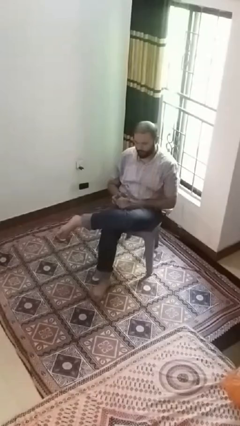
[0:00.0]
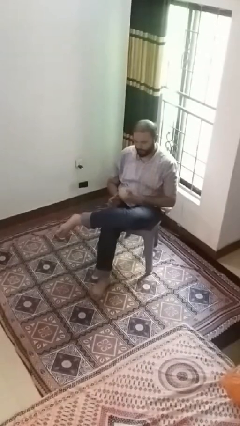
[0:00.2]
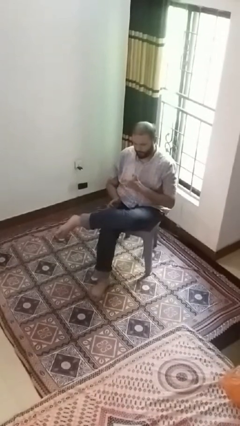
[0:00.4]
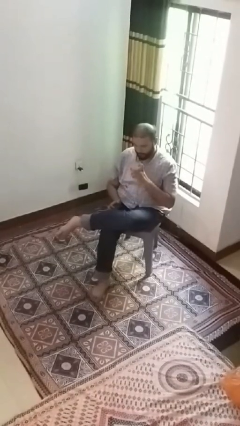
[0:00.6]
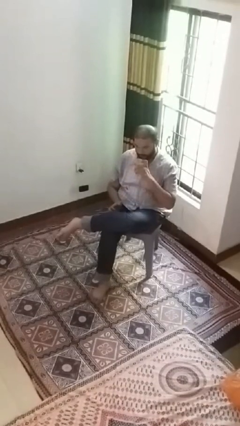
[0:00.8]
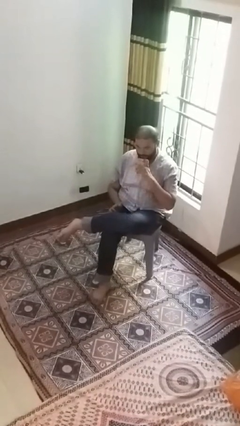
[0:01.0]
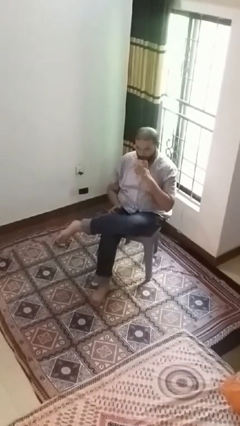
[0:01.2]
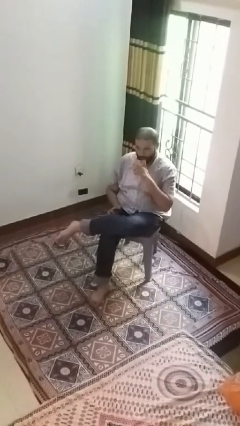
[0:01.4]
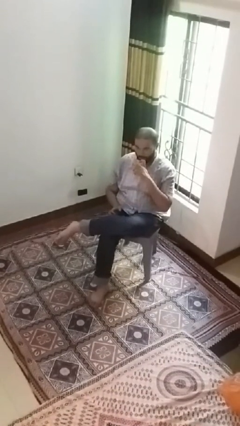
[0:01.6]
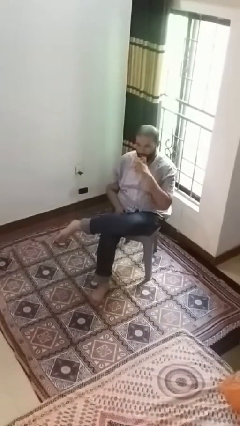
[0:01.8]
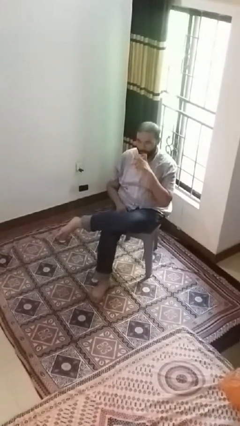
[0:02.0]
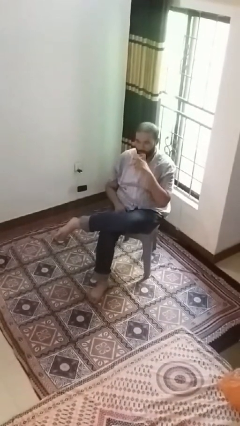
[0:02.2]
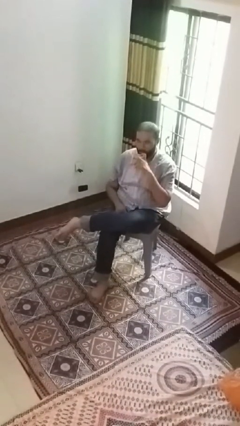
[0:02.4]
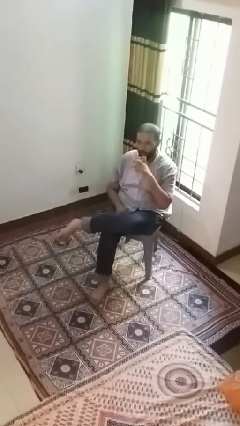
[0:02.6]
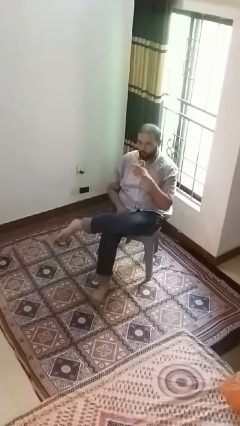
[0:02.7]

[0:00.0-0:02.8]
person drinks from straw

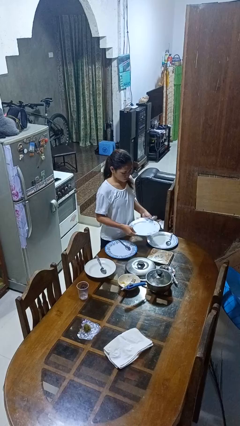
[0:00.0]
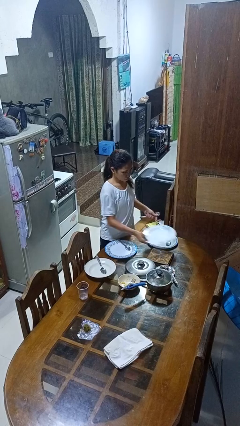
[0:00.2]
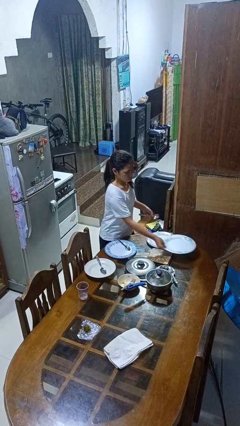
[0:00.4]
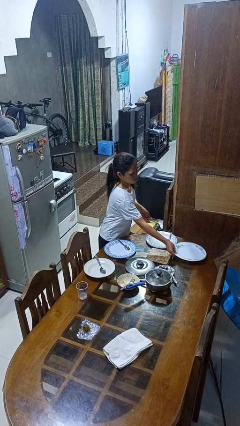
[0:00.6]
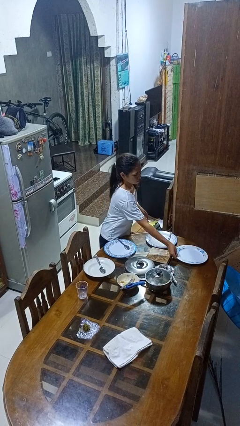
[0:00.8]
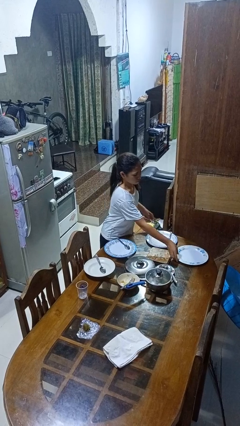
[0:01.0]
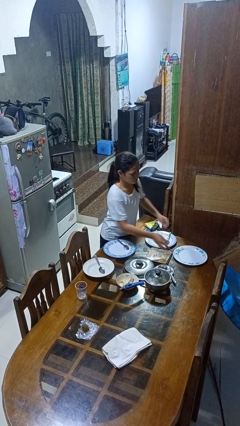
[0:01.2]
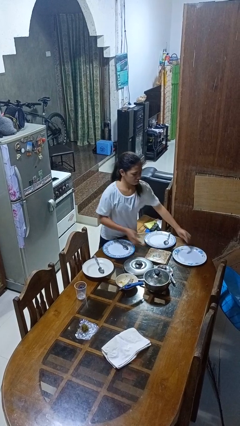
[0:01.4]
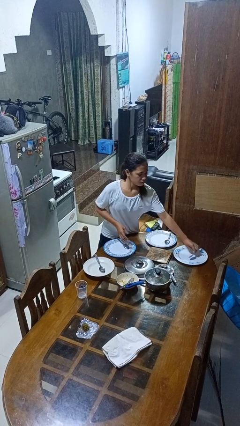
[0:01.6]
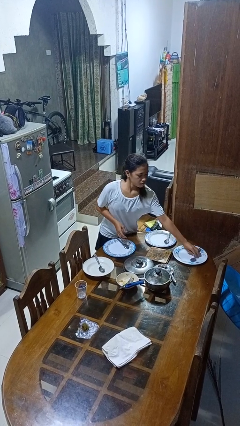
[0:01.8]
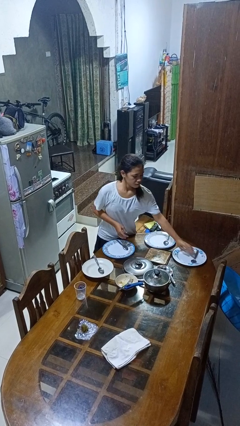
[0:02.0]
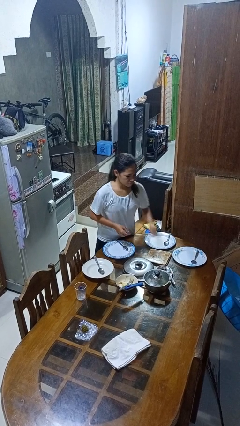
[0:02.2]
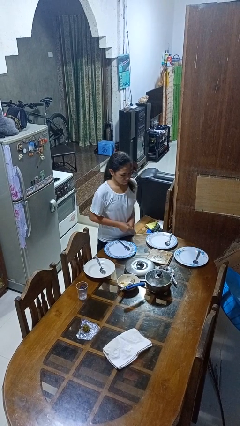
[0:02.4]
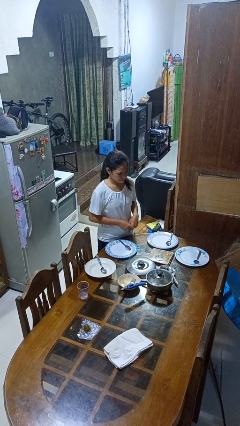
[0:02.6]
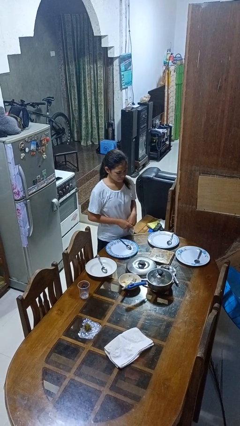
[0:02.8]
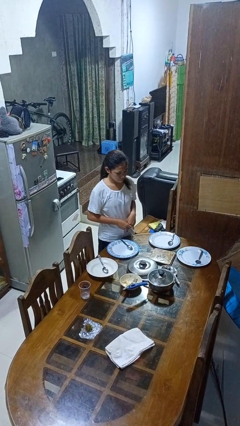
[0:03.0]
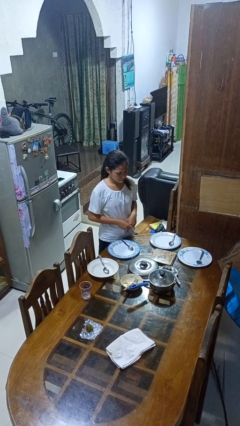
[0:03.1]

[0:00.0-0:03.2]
person sets table

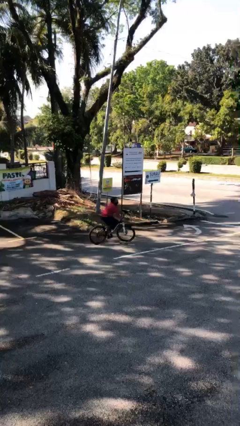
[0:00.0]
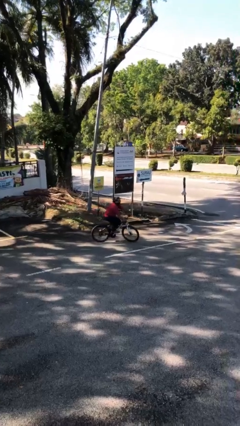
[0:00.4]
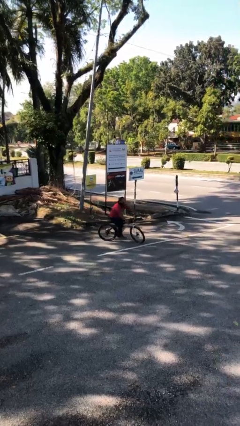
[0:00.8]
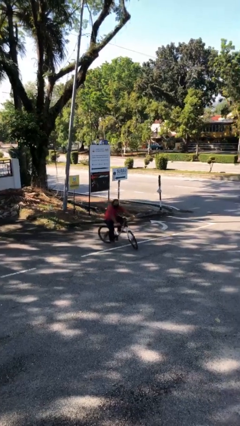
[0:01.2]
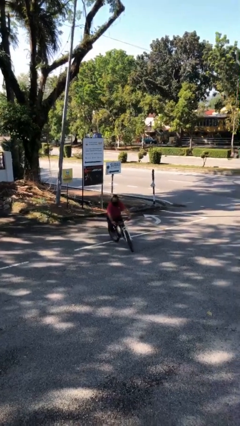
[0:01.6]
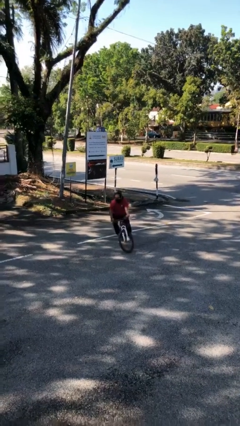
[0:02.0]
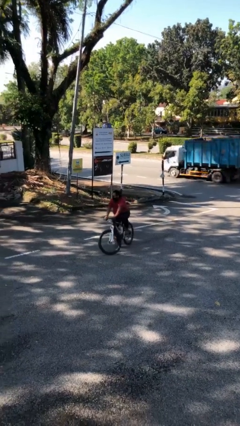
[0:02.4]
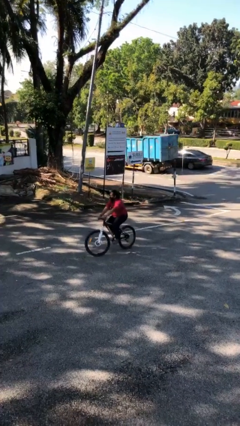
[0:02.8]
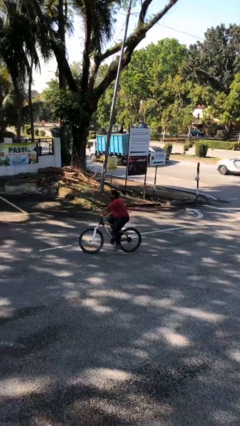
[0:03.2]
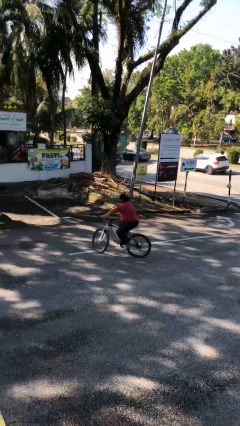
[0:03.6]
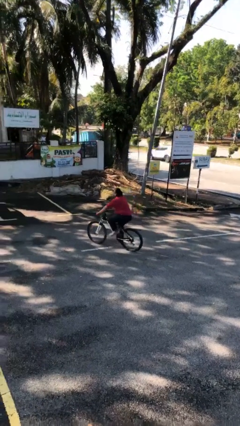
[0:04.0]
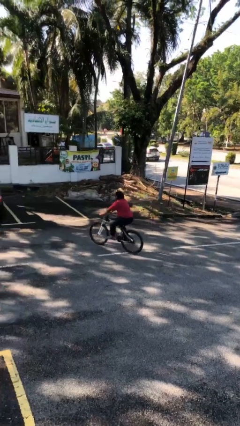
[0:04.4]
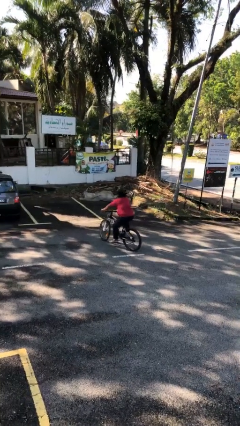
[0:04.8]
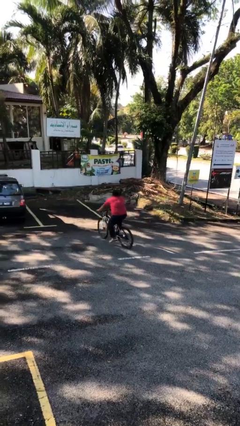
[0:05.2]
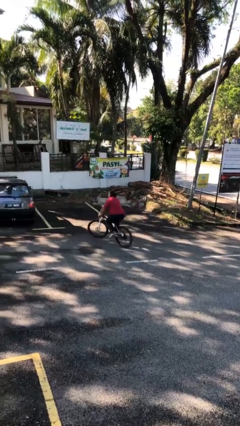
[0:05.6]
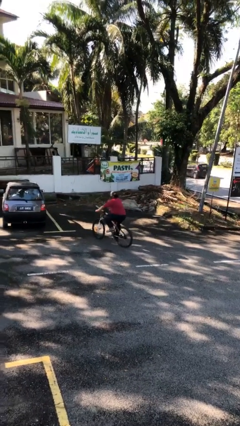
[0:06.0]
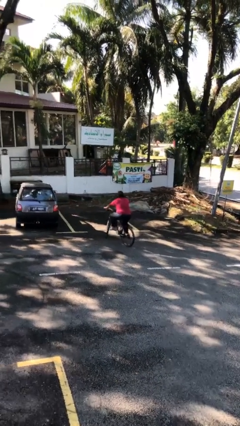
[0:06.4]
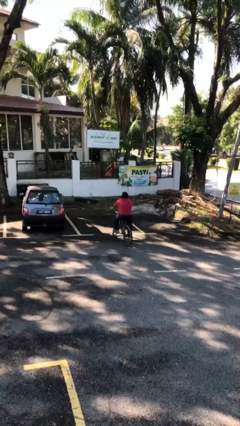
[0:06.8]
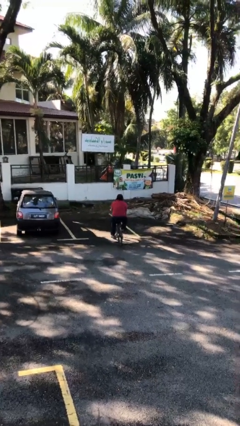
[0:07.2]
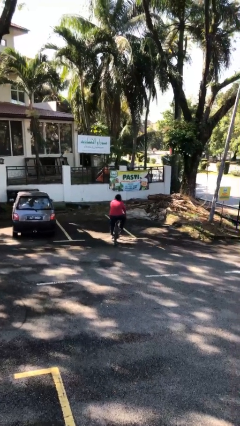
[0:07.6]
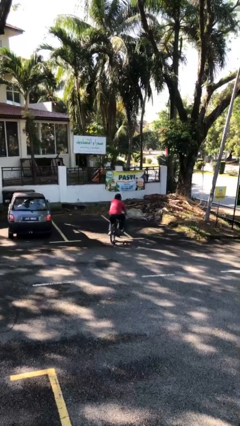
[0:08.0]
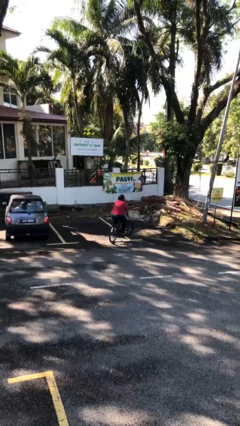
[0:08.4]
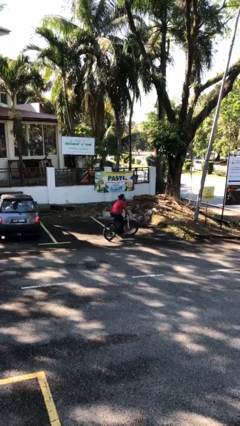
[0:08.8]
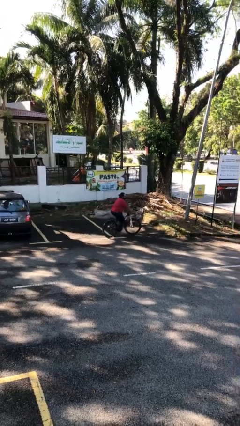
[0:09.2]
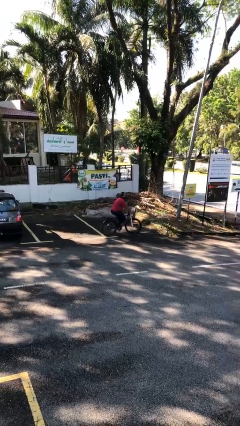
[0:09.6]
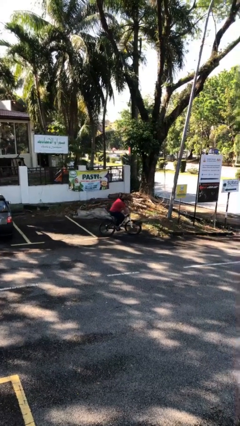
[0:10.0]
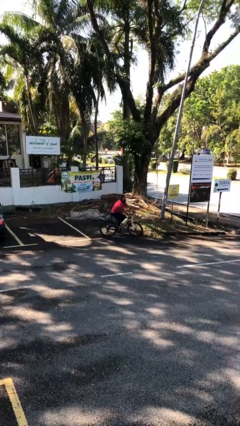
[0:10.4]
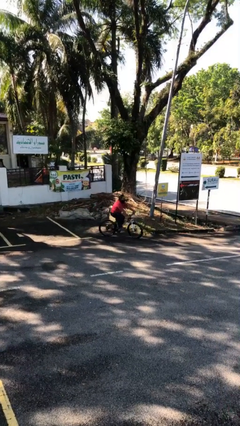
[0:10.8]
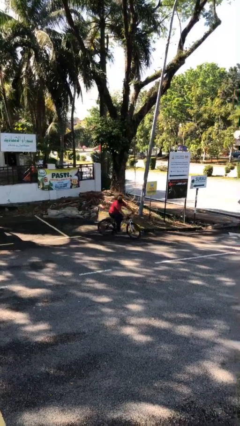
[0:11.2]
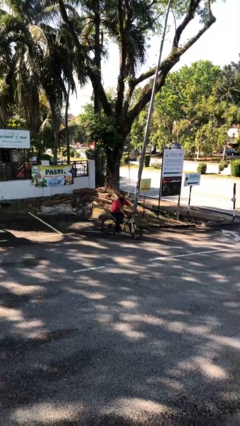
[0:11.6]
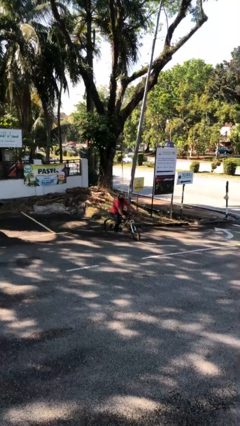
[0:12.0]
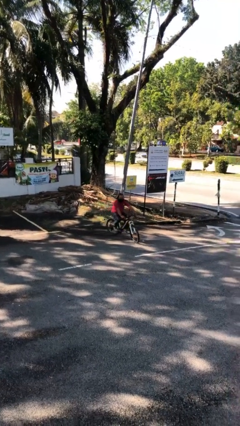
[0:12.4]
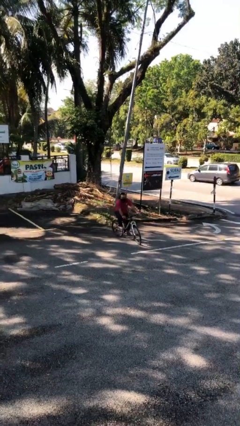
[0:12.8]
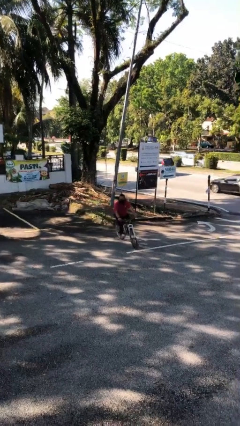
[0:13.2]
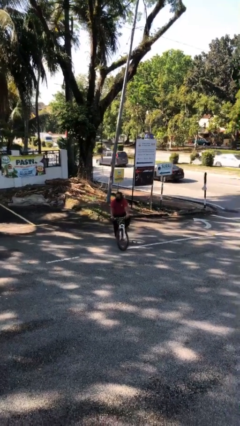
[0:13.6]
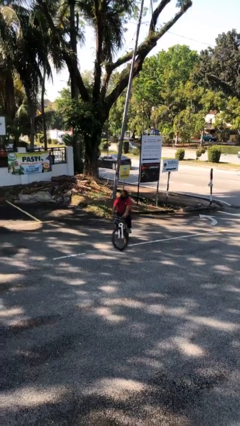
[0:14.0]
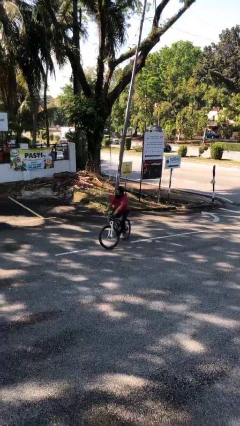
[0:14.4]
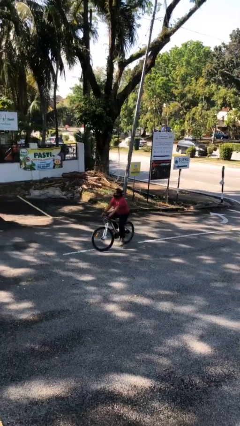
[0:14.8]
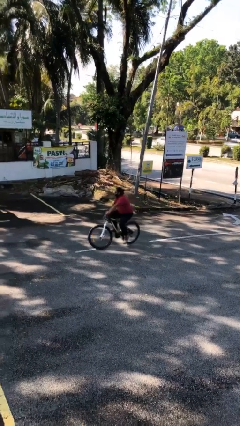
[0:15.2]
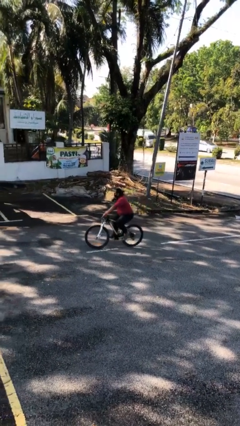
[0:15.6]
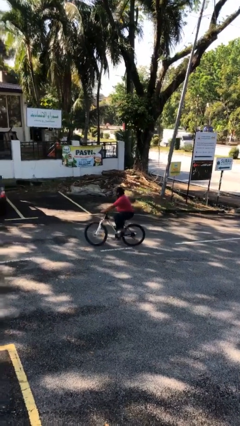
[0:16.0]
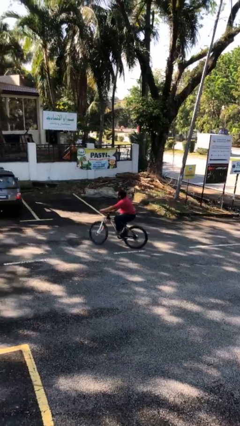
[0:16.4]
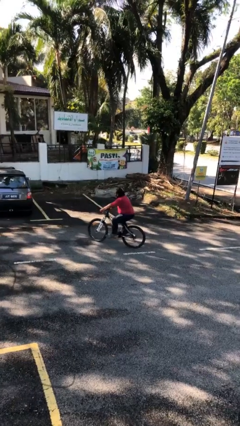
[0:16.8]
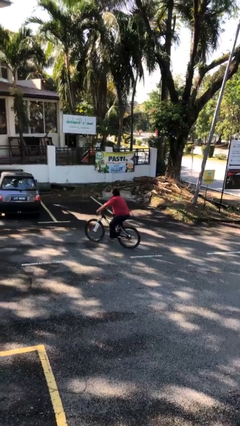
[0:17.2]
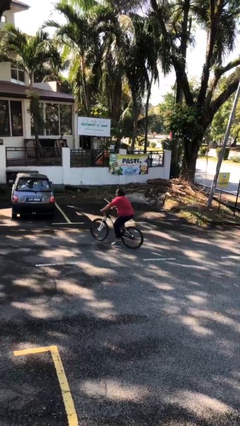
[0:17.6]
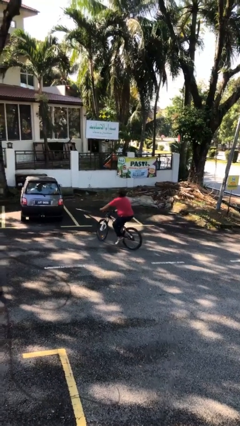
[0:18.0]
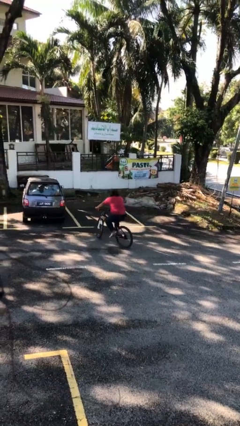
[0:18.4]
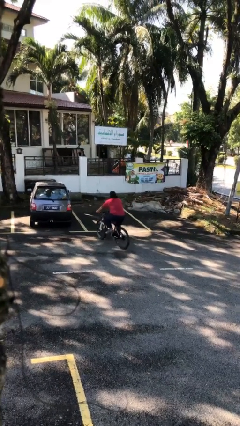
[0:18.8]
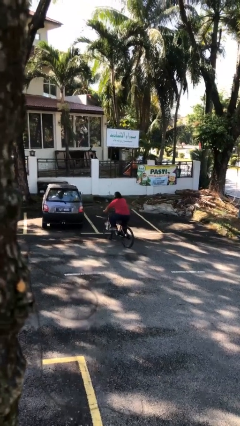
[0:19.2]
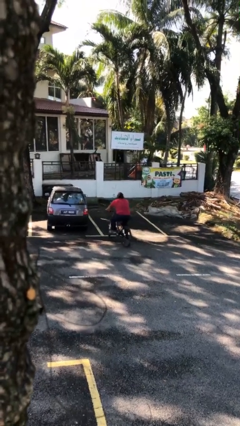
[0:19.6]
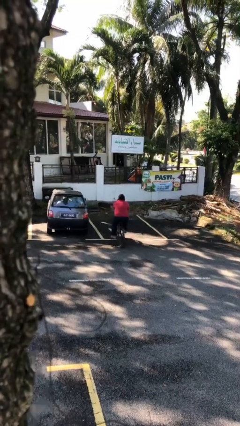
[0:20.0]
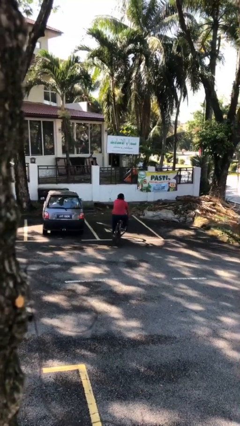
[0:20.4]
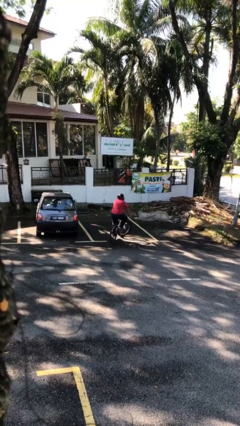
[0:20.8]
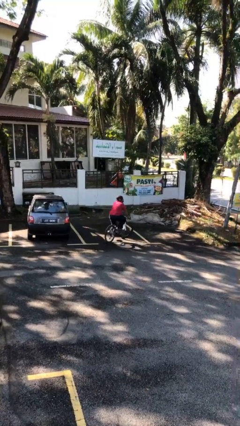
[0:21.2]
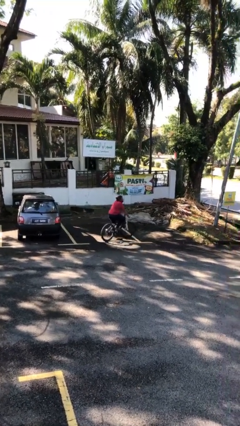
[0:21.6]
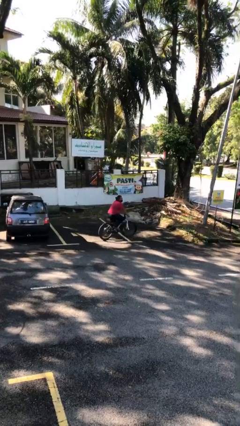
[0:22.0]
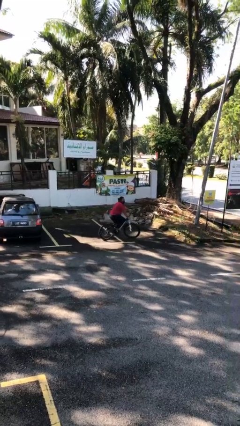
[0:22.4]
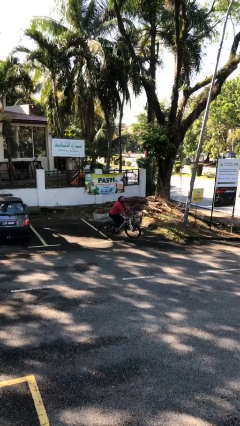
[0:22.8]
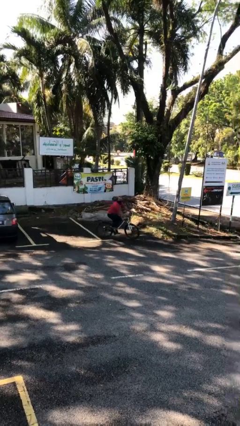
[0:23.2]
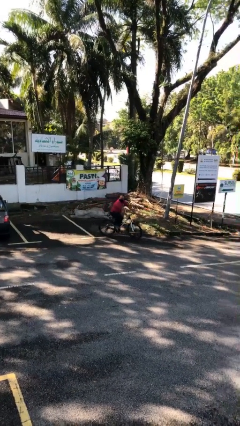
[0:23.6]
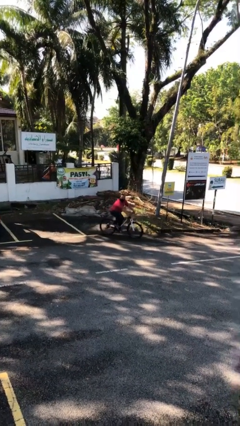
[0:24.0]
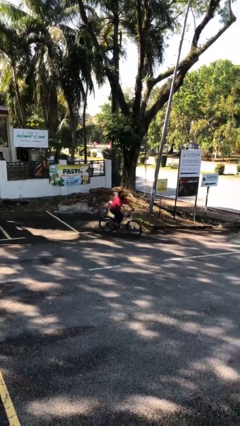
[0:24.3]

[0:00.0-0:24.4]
person rides bicycle
